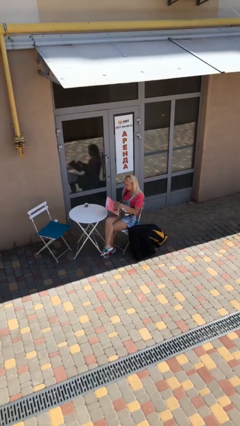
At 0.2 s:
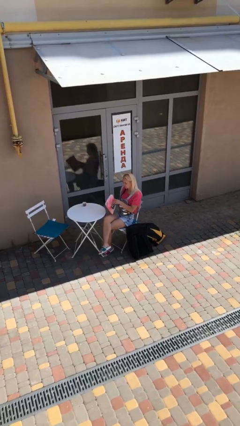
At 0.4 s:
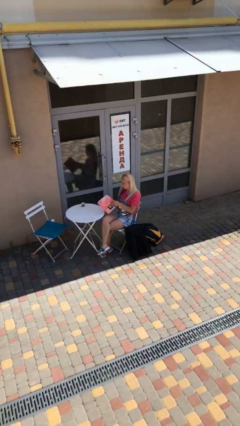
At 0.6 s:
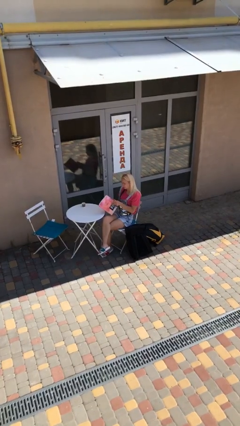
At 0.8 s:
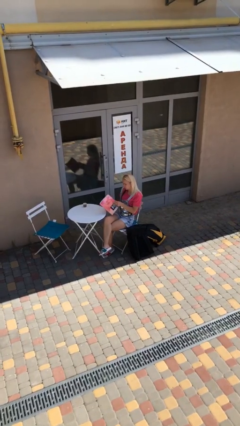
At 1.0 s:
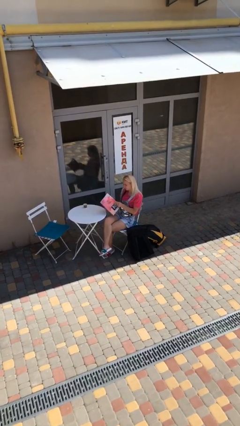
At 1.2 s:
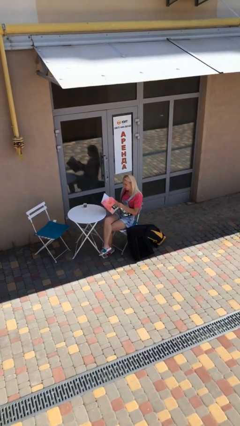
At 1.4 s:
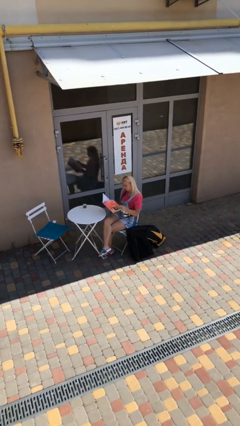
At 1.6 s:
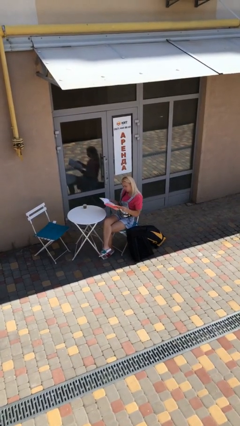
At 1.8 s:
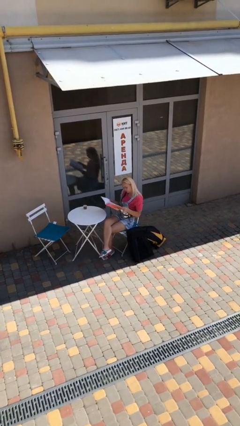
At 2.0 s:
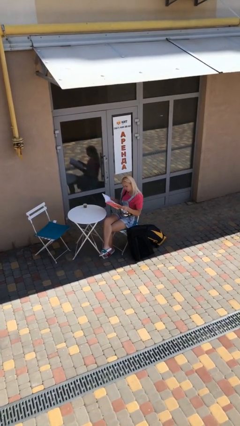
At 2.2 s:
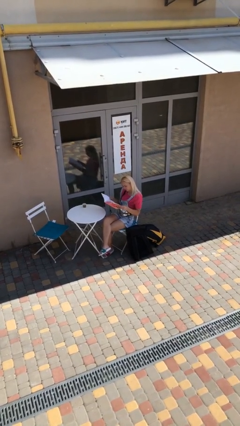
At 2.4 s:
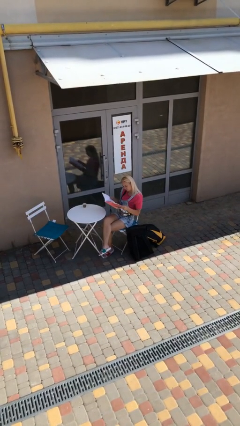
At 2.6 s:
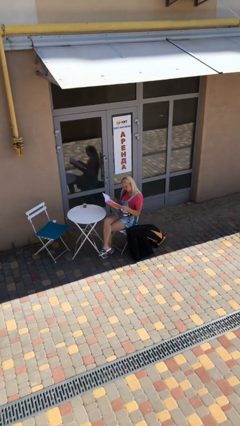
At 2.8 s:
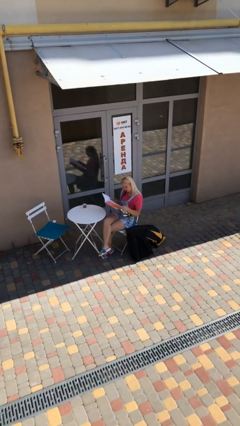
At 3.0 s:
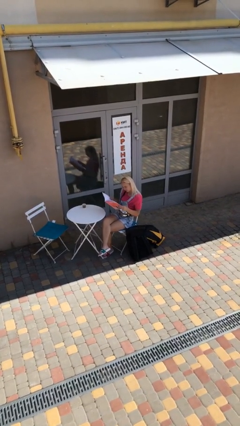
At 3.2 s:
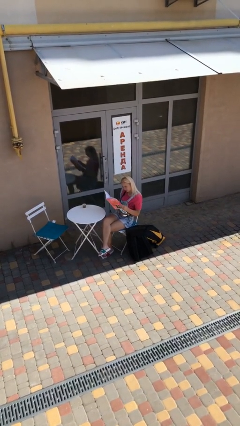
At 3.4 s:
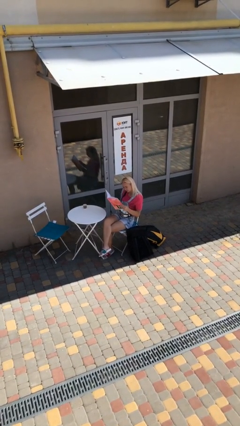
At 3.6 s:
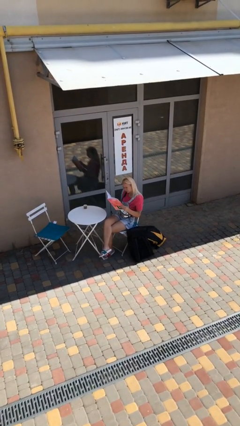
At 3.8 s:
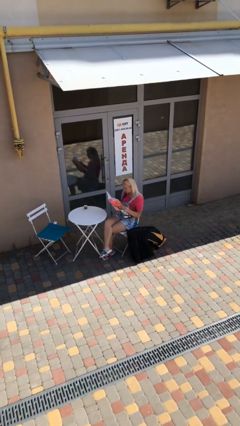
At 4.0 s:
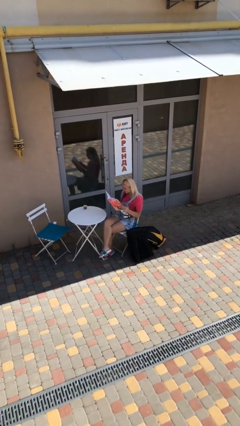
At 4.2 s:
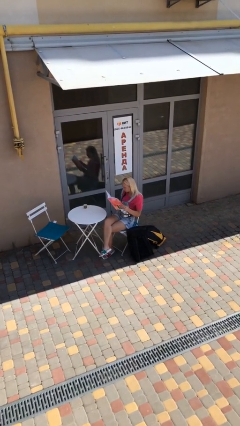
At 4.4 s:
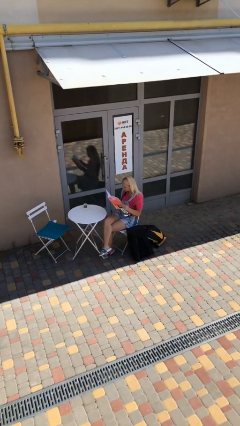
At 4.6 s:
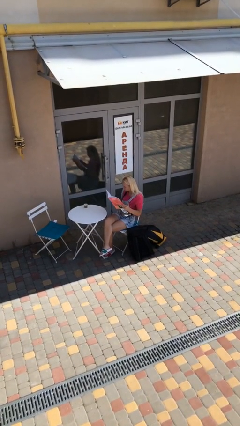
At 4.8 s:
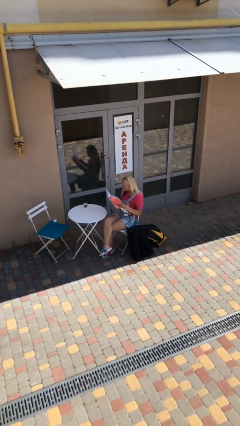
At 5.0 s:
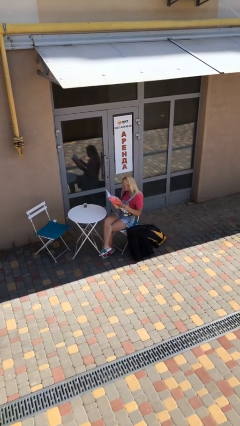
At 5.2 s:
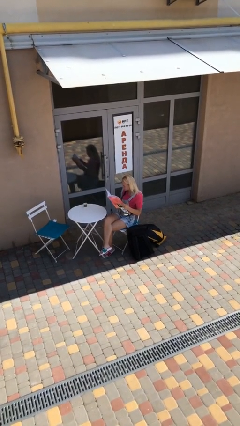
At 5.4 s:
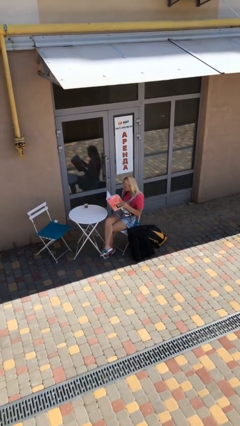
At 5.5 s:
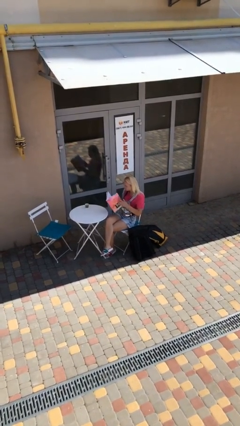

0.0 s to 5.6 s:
person reads document

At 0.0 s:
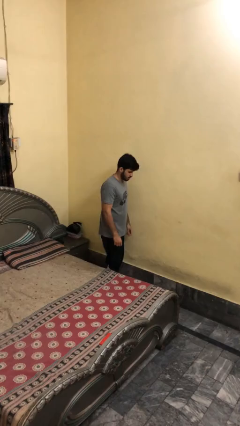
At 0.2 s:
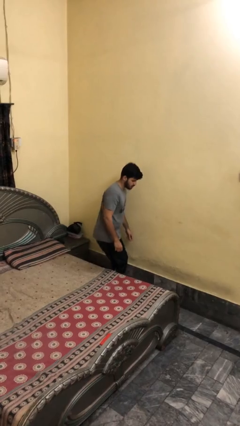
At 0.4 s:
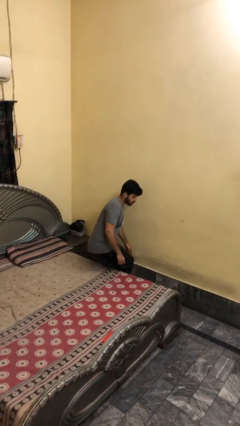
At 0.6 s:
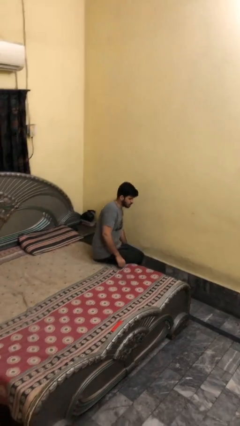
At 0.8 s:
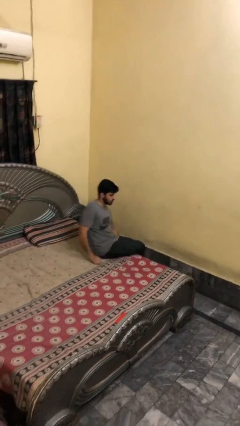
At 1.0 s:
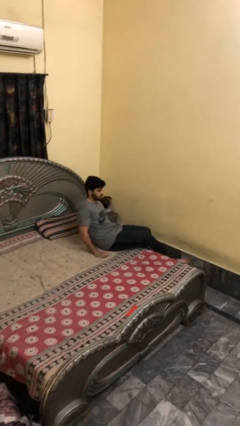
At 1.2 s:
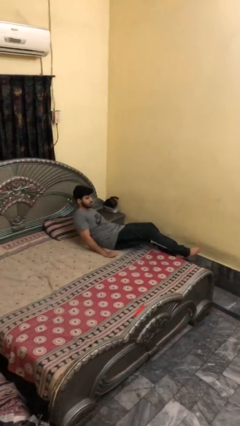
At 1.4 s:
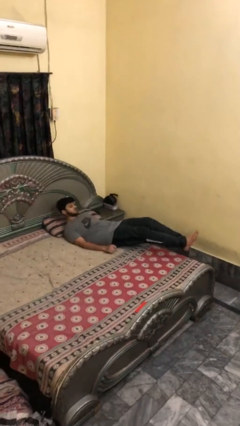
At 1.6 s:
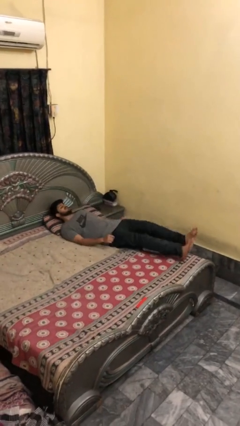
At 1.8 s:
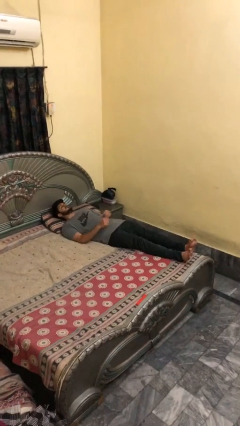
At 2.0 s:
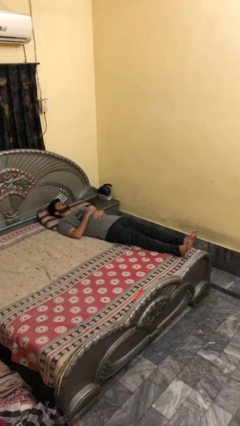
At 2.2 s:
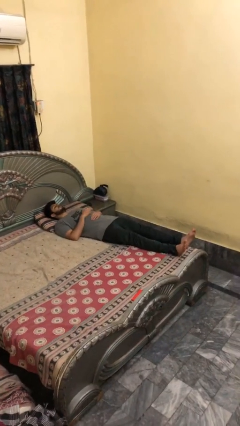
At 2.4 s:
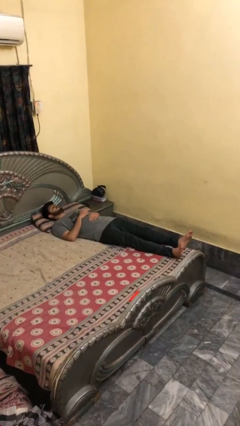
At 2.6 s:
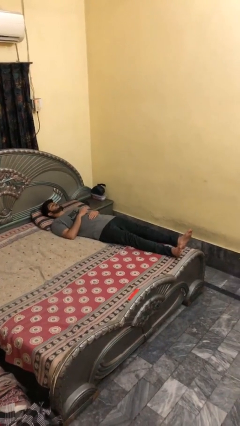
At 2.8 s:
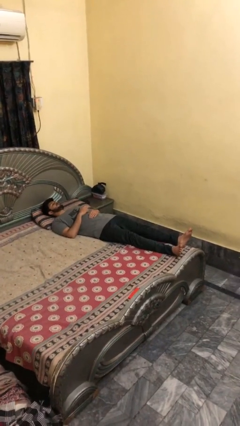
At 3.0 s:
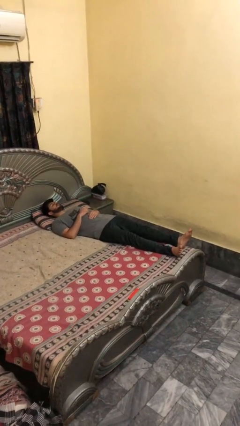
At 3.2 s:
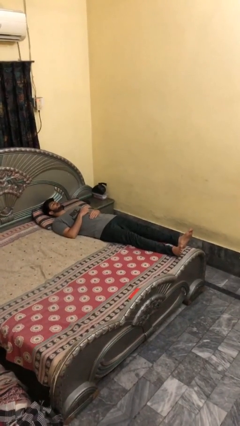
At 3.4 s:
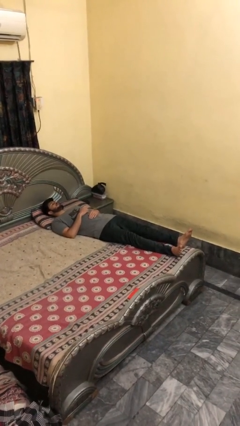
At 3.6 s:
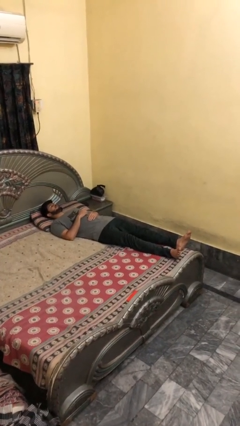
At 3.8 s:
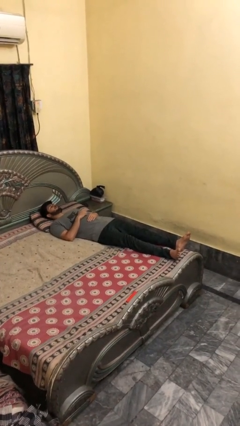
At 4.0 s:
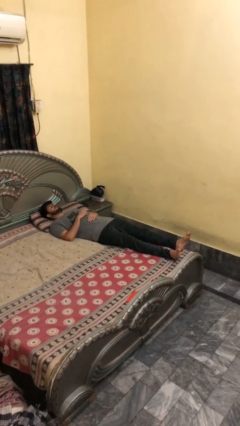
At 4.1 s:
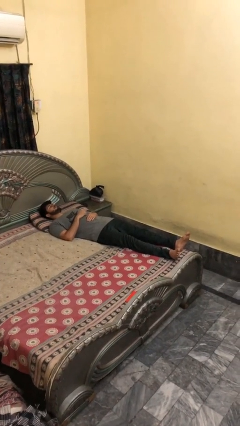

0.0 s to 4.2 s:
person lies down on bed

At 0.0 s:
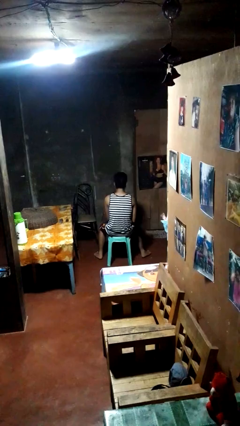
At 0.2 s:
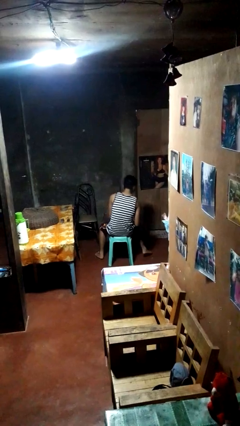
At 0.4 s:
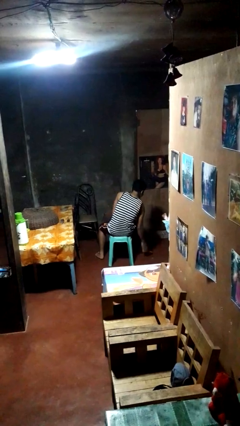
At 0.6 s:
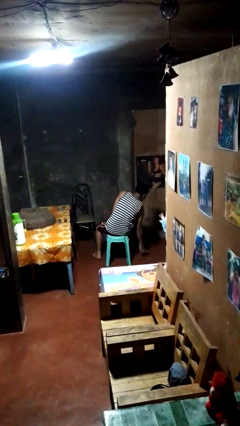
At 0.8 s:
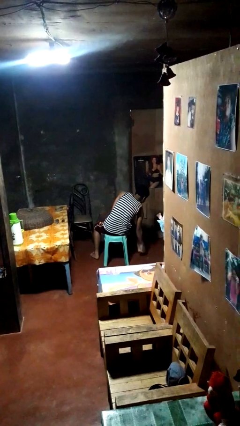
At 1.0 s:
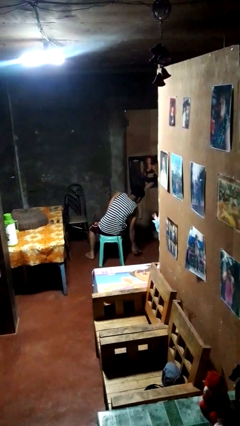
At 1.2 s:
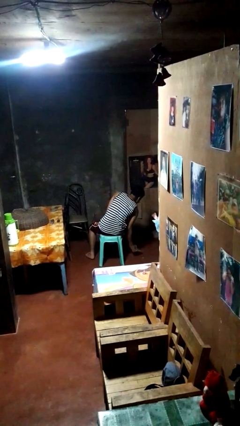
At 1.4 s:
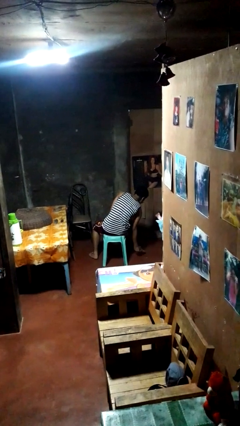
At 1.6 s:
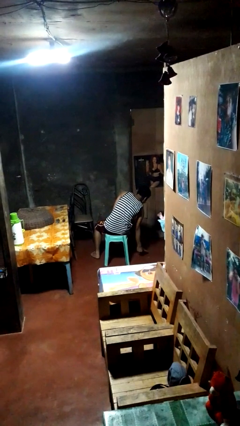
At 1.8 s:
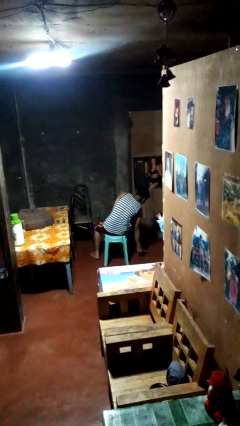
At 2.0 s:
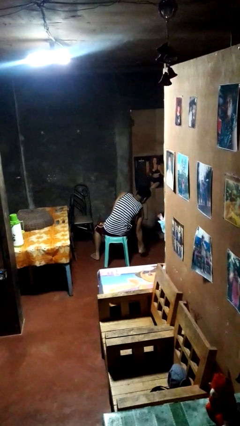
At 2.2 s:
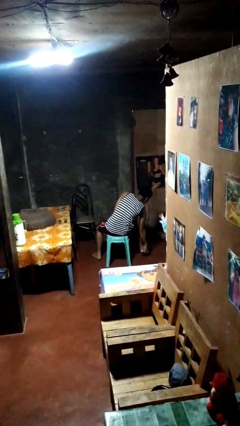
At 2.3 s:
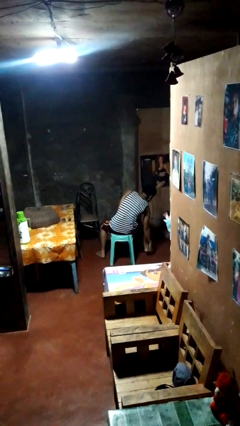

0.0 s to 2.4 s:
person rubs foot

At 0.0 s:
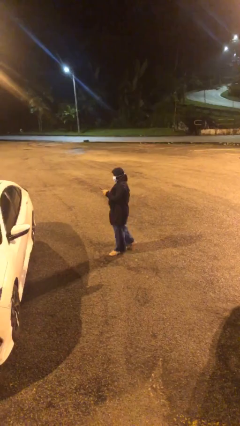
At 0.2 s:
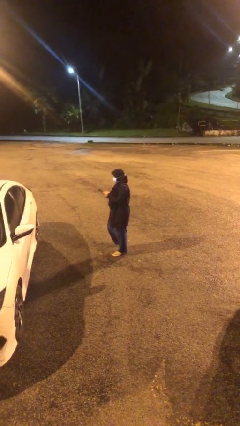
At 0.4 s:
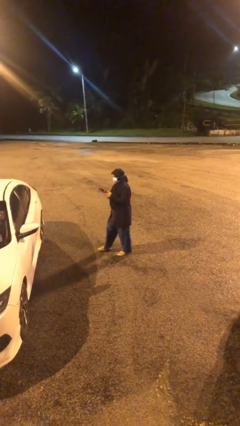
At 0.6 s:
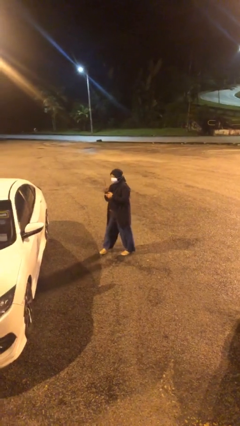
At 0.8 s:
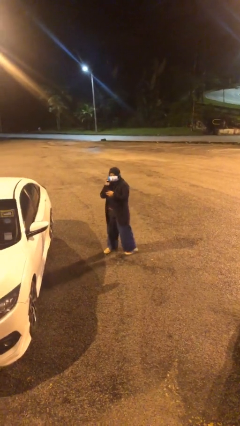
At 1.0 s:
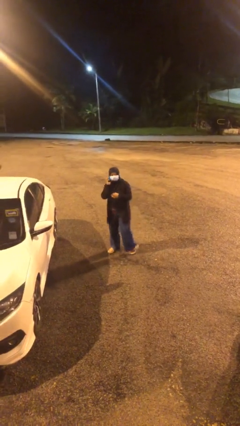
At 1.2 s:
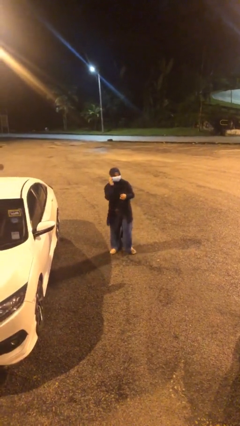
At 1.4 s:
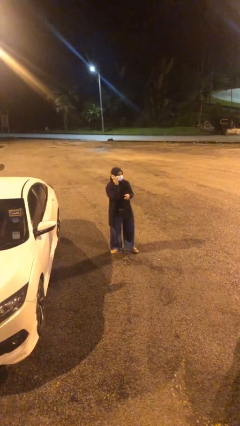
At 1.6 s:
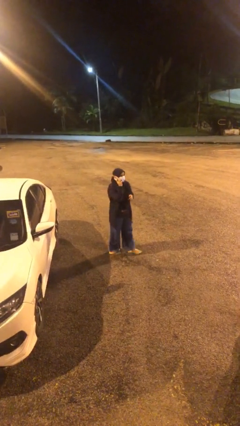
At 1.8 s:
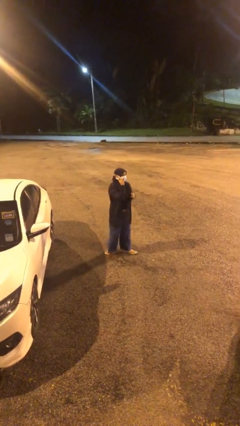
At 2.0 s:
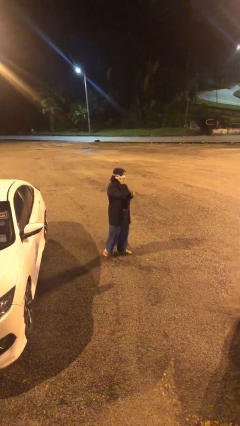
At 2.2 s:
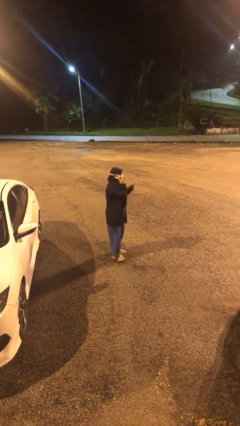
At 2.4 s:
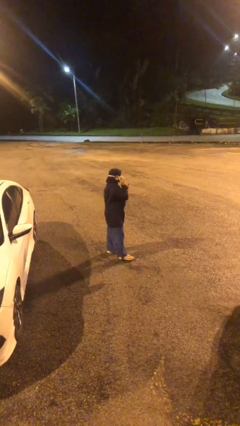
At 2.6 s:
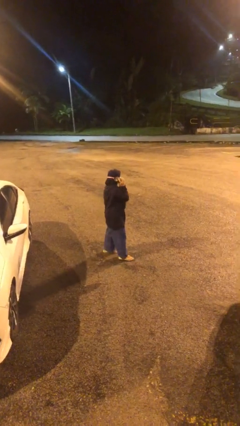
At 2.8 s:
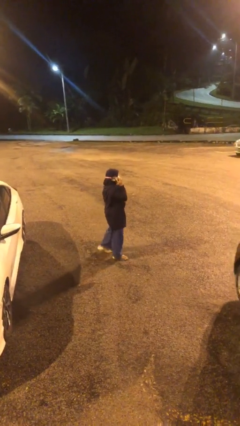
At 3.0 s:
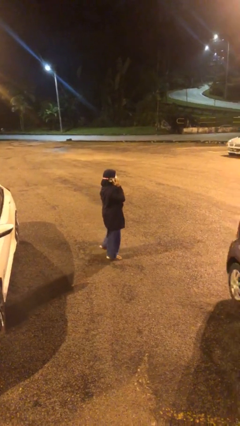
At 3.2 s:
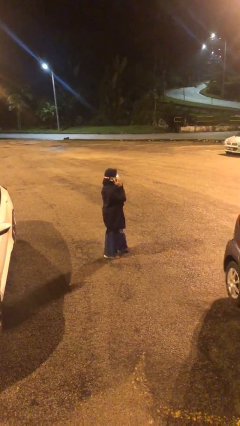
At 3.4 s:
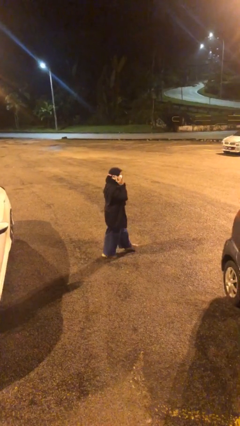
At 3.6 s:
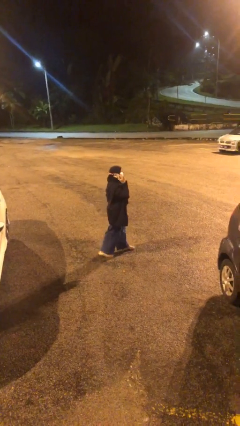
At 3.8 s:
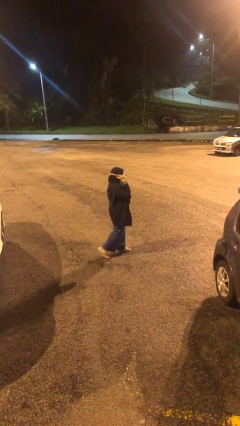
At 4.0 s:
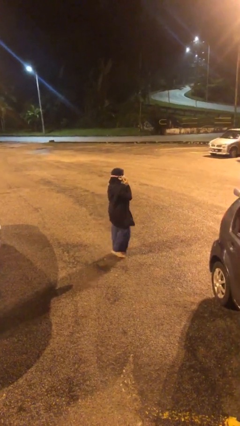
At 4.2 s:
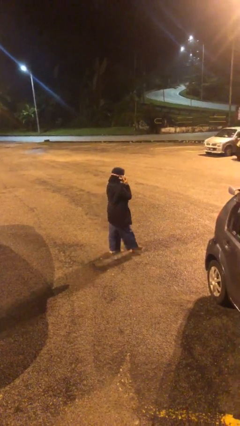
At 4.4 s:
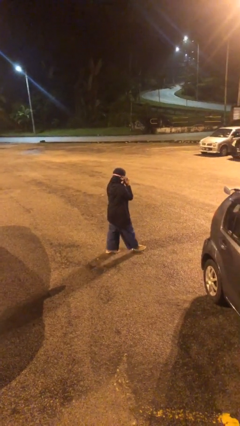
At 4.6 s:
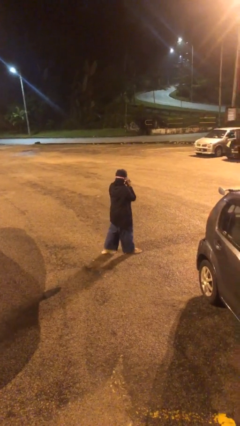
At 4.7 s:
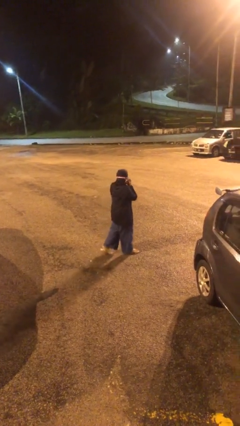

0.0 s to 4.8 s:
person talks on phone

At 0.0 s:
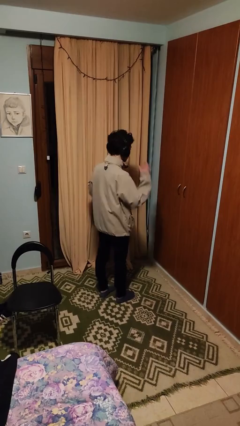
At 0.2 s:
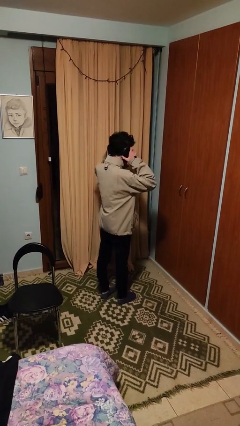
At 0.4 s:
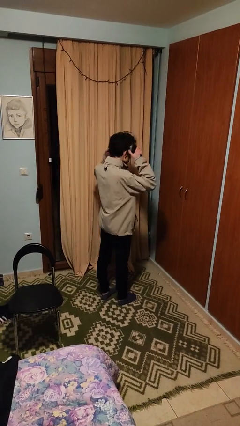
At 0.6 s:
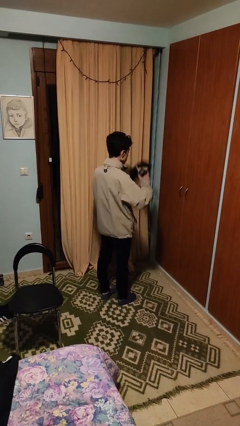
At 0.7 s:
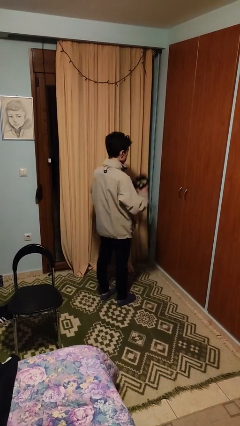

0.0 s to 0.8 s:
person takes off headphones
